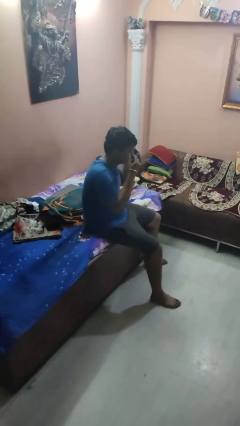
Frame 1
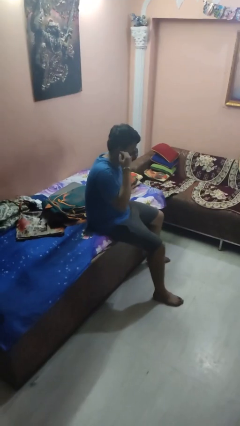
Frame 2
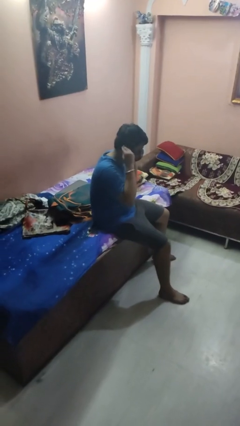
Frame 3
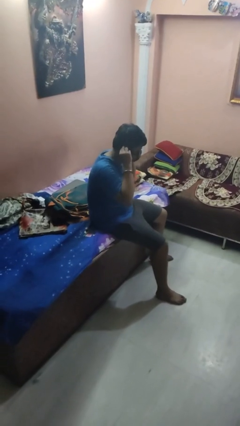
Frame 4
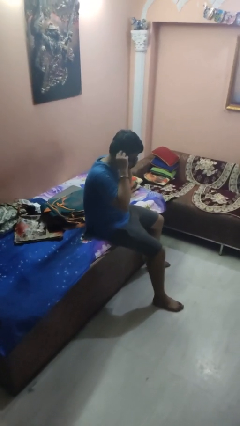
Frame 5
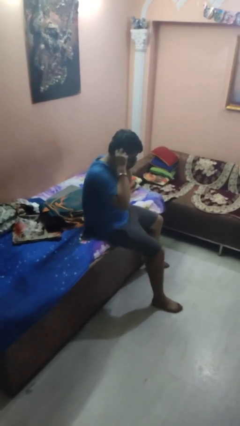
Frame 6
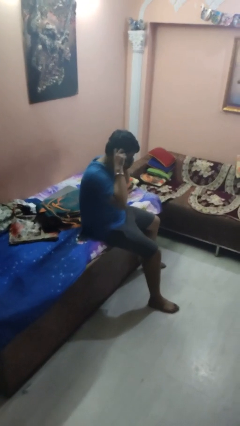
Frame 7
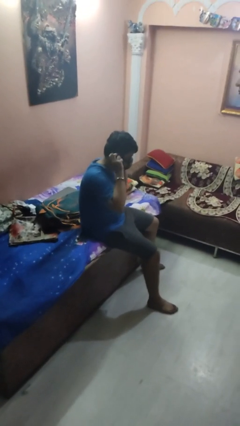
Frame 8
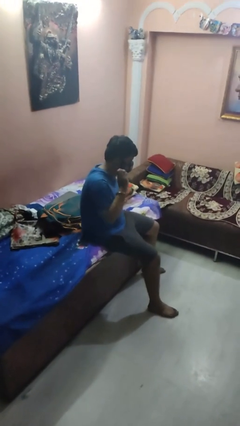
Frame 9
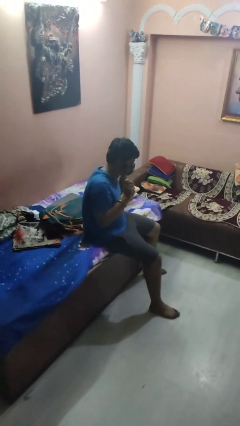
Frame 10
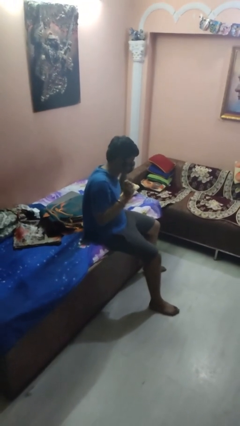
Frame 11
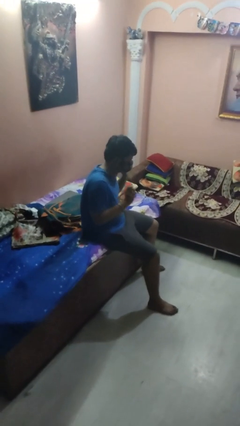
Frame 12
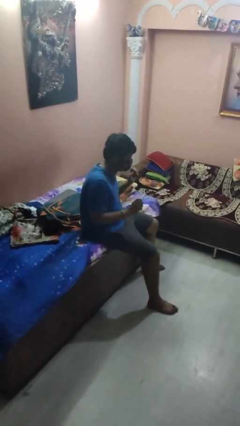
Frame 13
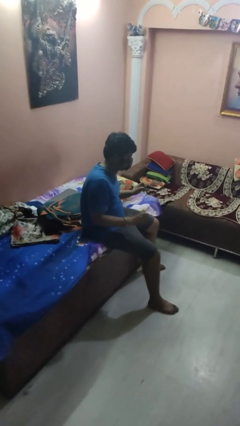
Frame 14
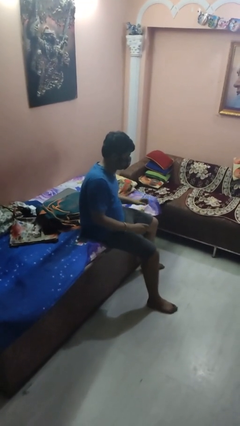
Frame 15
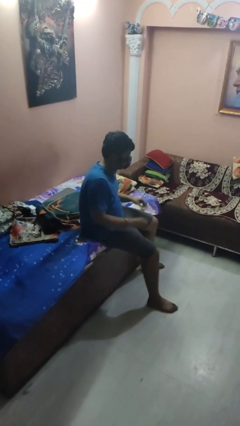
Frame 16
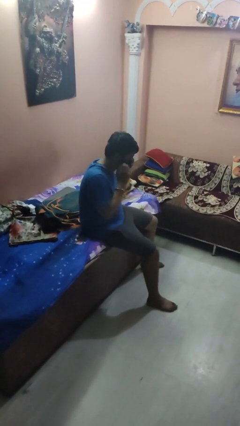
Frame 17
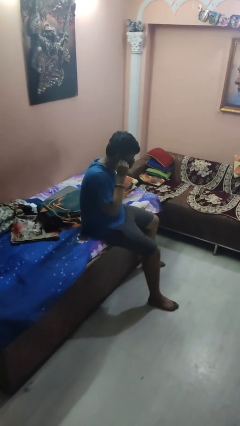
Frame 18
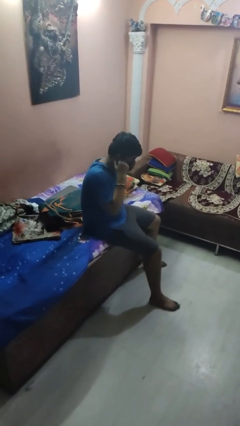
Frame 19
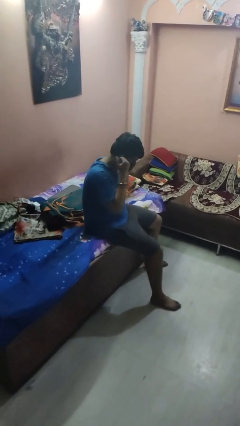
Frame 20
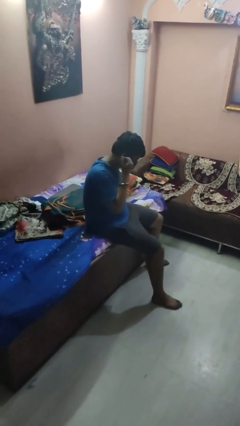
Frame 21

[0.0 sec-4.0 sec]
person puts on facemask

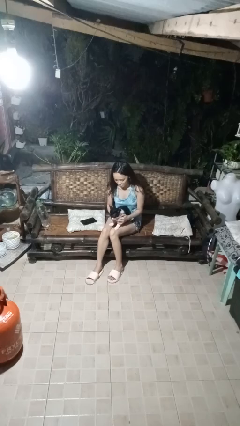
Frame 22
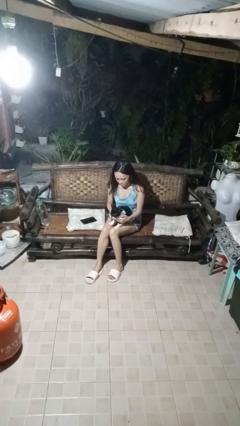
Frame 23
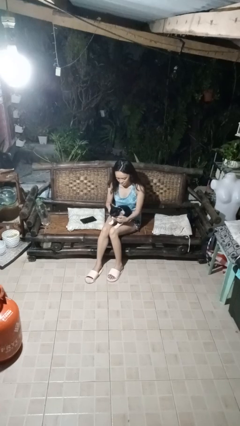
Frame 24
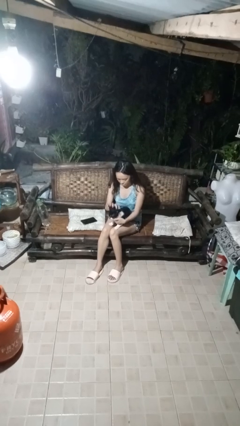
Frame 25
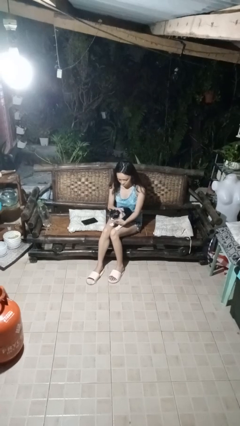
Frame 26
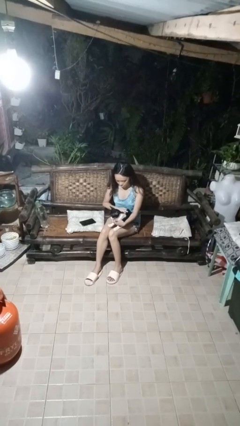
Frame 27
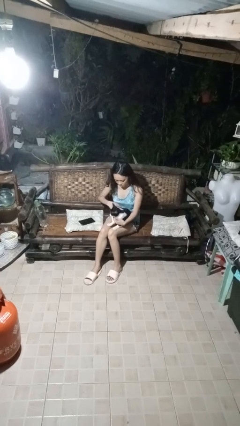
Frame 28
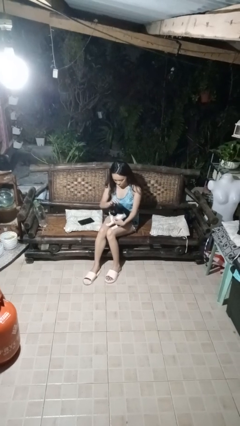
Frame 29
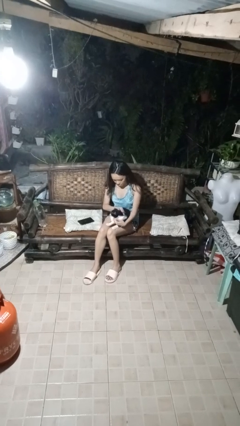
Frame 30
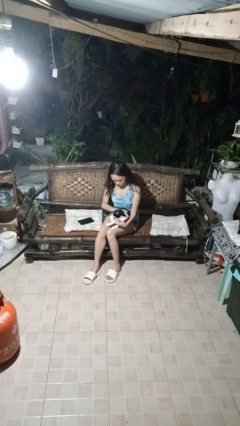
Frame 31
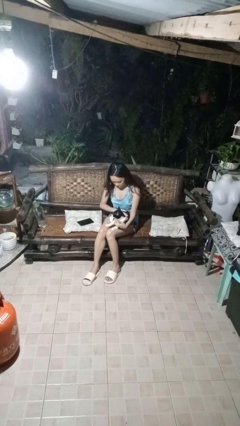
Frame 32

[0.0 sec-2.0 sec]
person pets cat

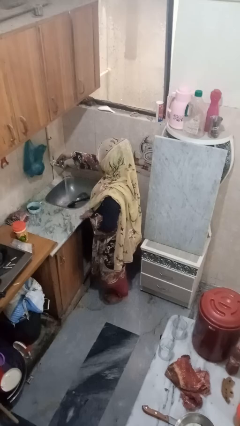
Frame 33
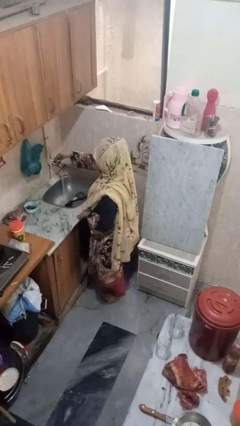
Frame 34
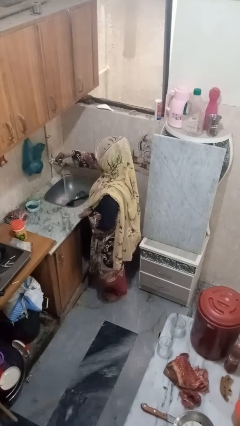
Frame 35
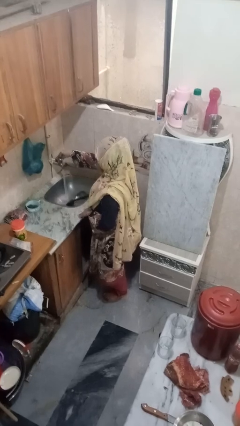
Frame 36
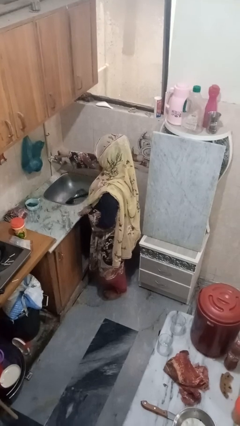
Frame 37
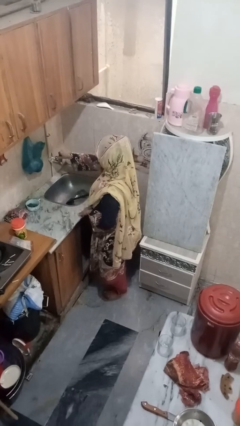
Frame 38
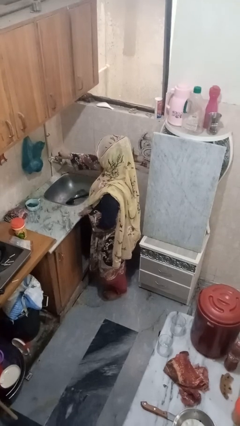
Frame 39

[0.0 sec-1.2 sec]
person turns off faucet

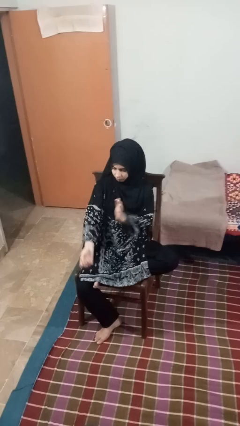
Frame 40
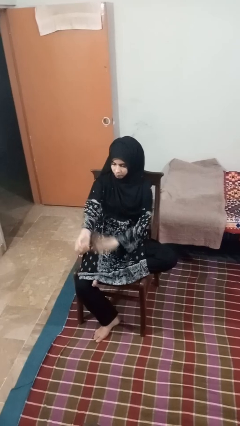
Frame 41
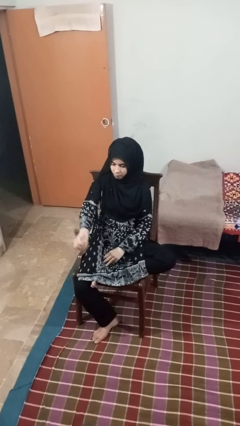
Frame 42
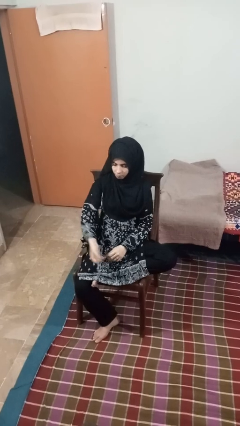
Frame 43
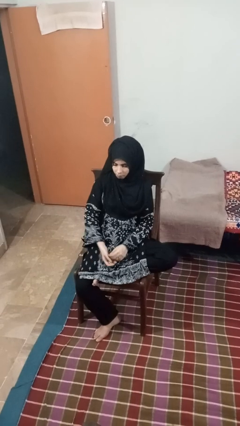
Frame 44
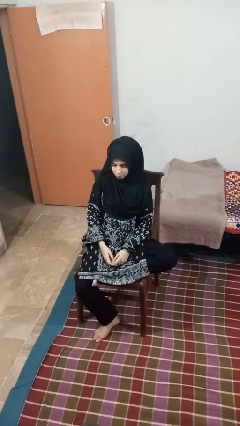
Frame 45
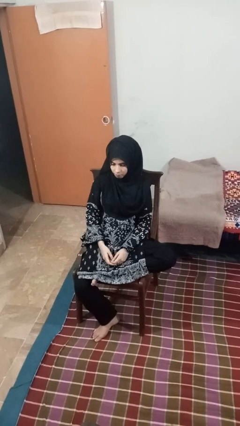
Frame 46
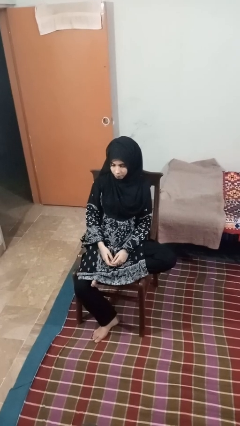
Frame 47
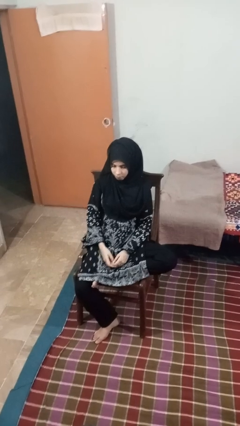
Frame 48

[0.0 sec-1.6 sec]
person swats bug

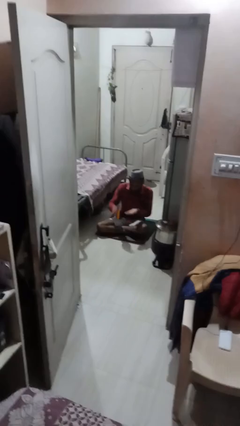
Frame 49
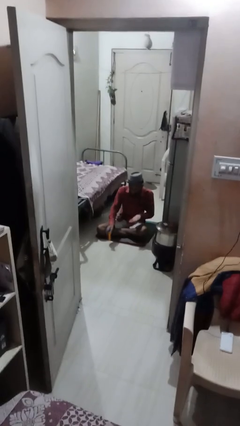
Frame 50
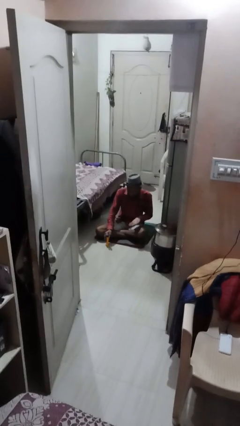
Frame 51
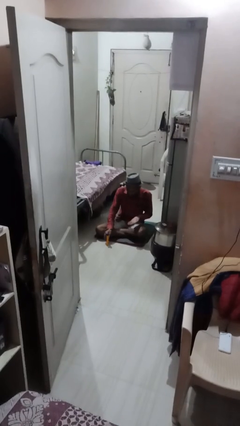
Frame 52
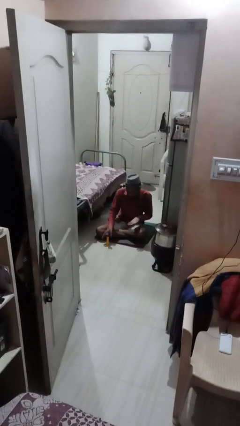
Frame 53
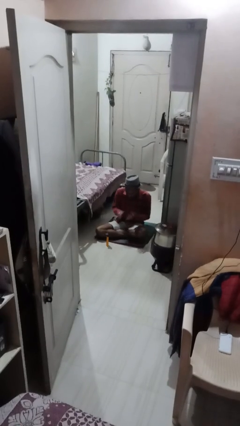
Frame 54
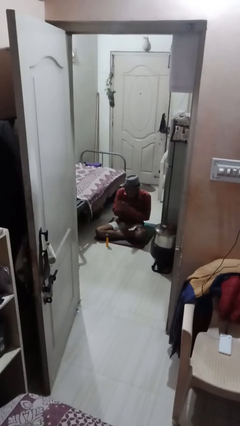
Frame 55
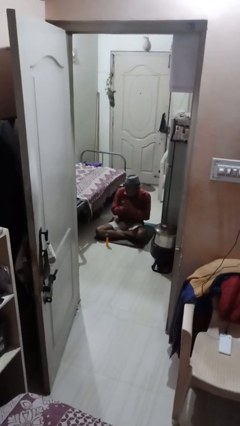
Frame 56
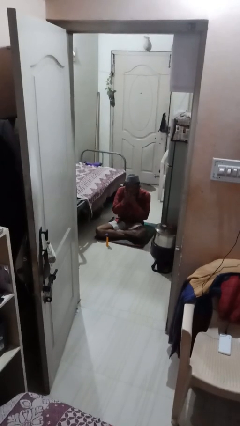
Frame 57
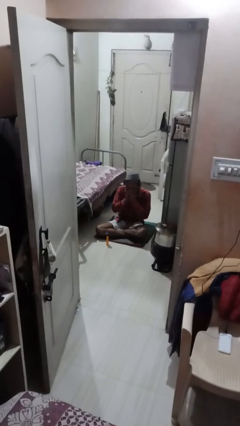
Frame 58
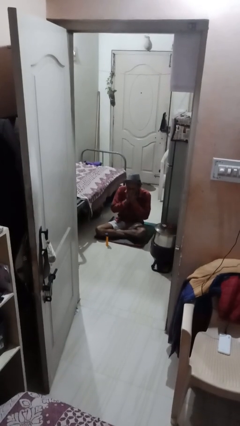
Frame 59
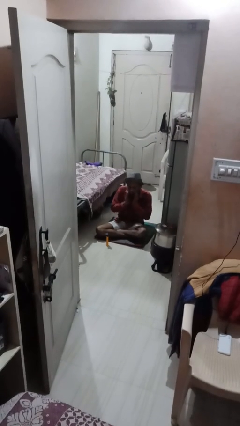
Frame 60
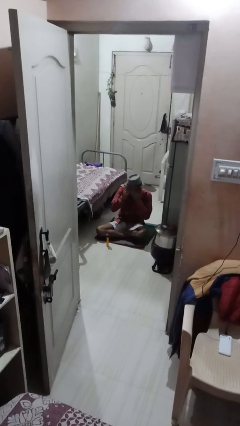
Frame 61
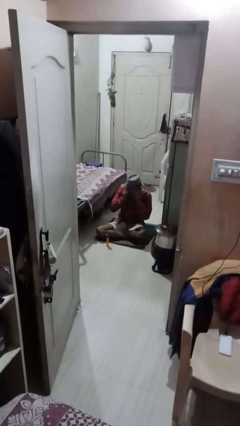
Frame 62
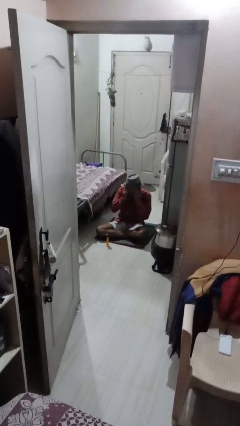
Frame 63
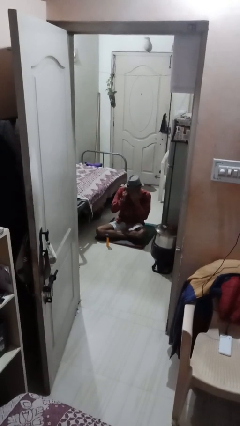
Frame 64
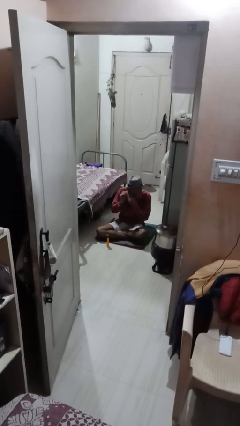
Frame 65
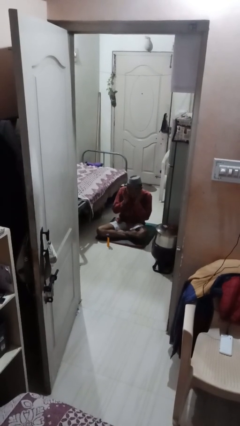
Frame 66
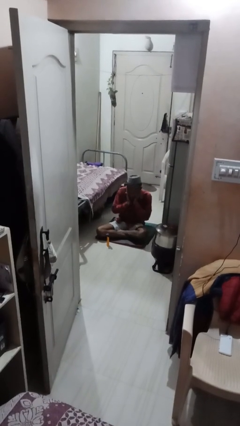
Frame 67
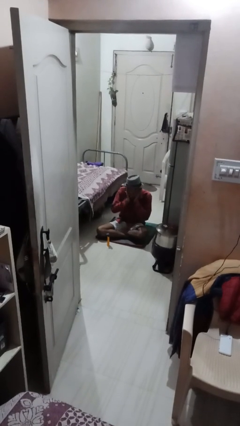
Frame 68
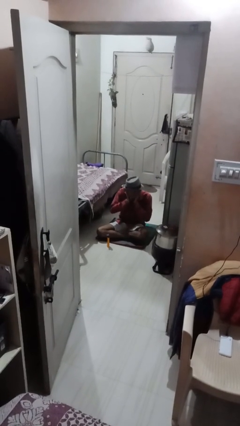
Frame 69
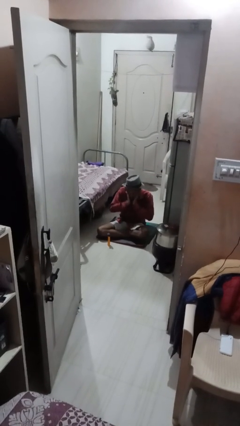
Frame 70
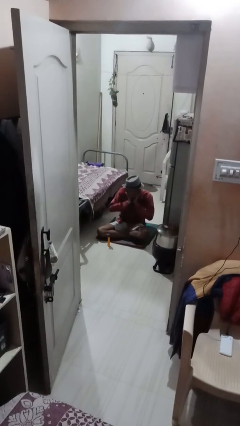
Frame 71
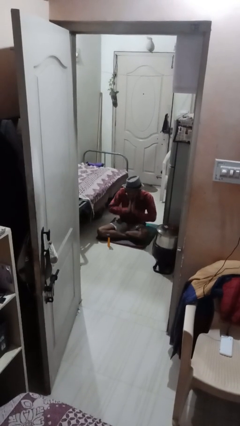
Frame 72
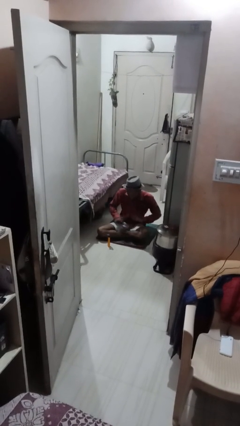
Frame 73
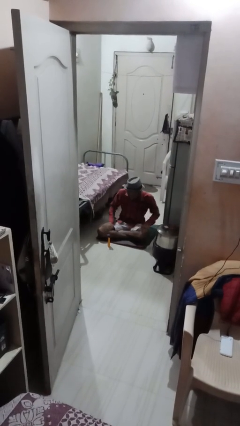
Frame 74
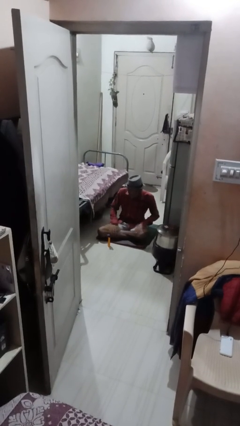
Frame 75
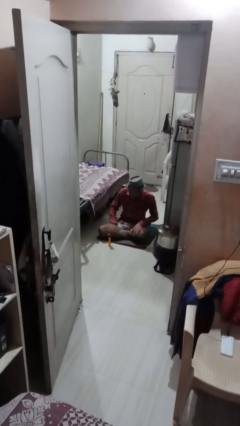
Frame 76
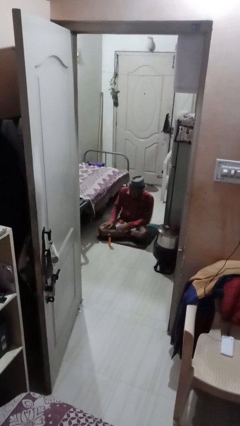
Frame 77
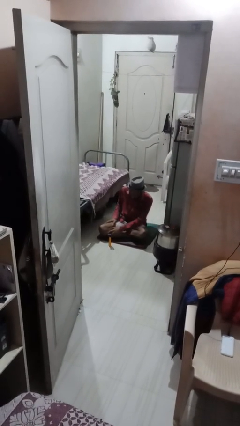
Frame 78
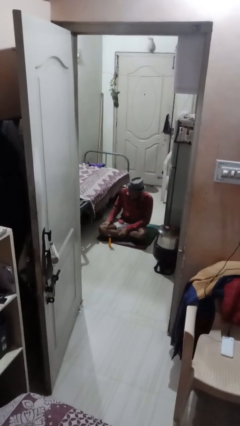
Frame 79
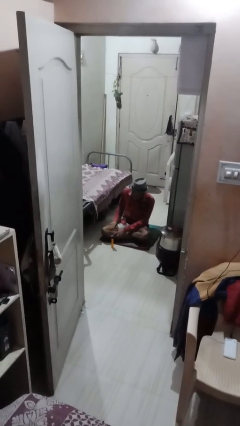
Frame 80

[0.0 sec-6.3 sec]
person applies sunscreen

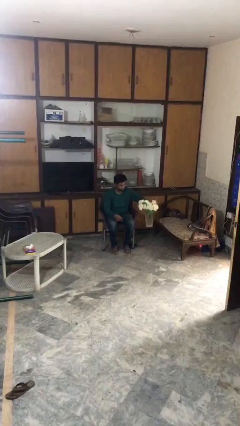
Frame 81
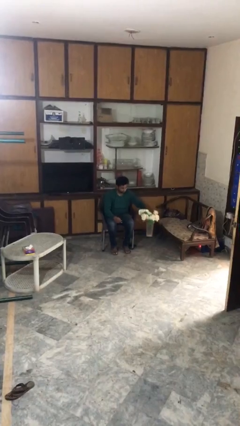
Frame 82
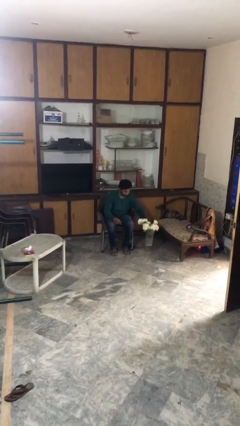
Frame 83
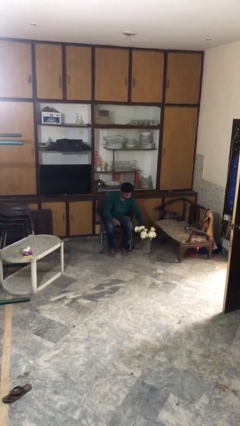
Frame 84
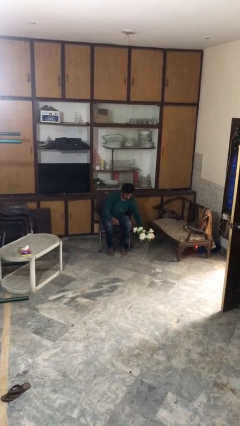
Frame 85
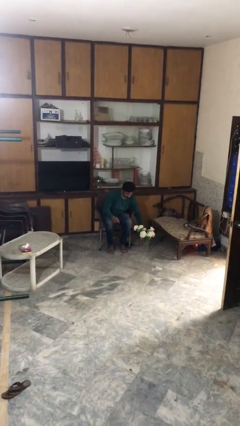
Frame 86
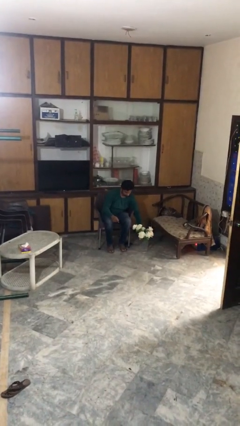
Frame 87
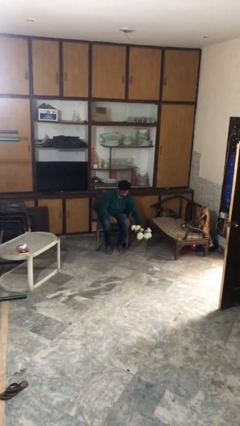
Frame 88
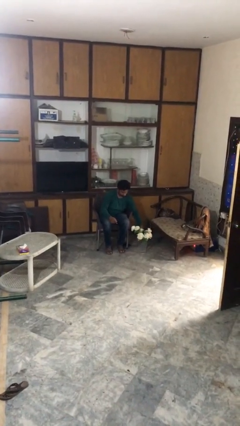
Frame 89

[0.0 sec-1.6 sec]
person puts down object on floor

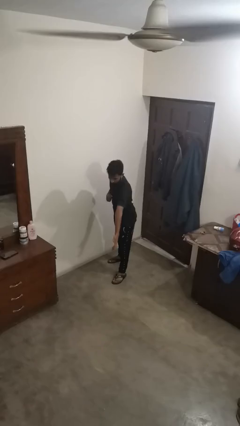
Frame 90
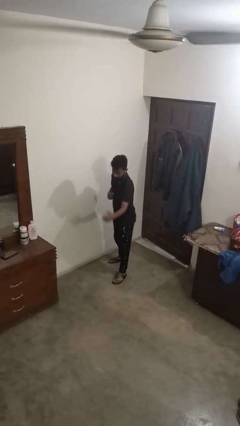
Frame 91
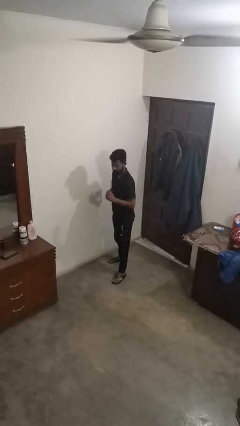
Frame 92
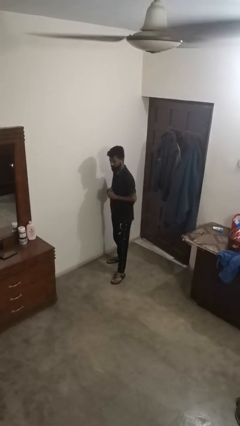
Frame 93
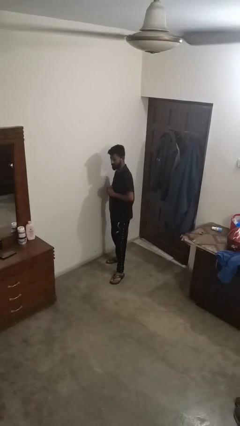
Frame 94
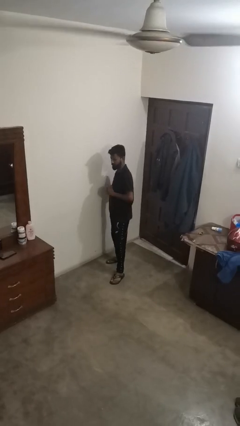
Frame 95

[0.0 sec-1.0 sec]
person karate chop
